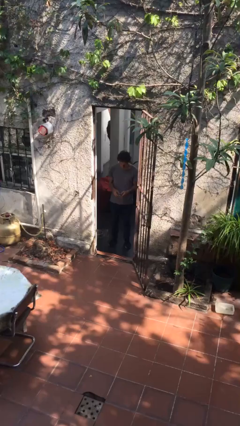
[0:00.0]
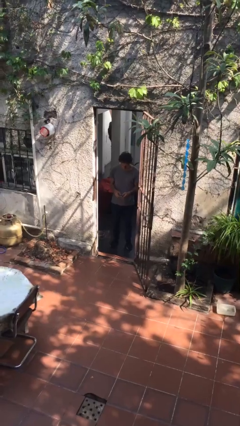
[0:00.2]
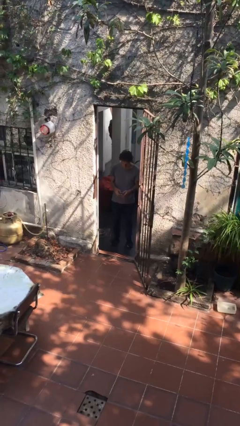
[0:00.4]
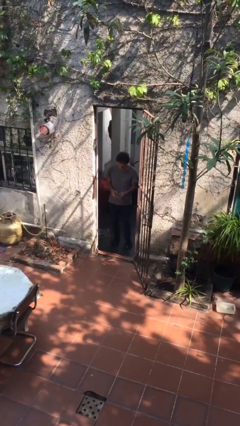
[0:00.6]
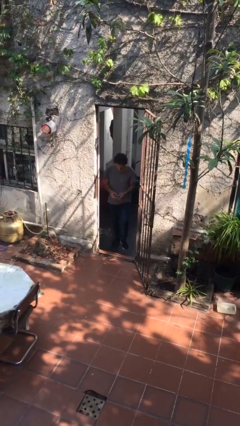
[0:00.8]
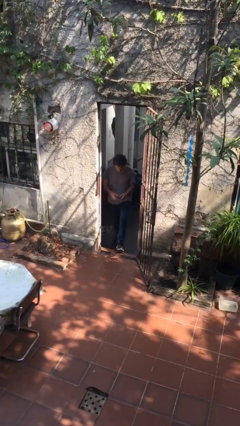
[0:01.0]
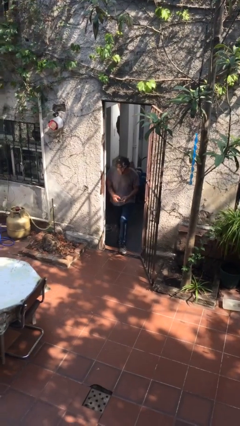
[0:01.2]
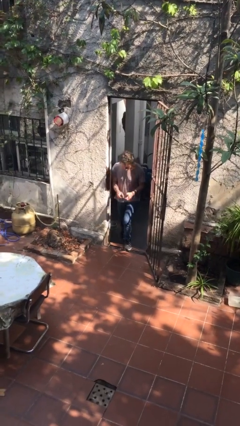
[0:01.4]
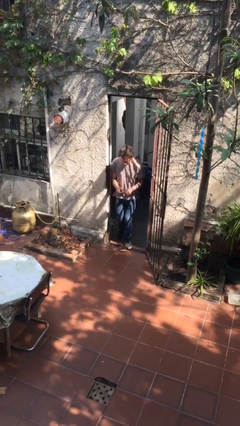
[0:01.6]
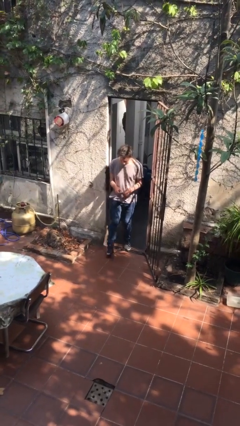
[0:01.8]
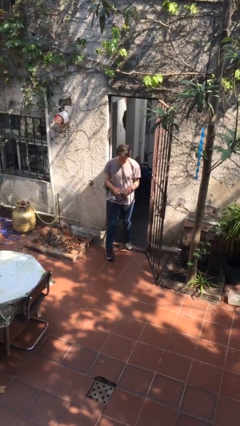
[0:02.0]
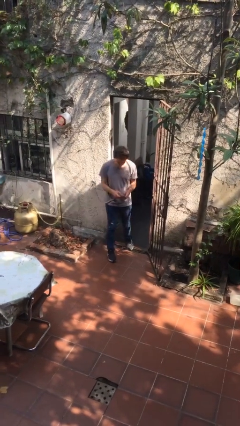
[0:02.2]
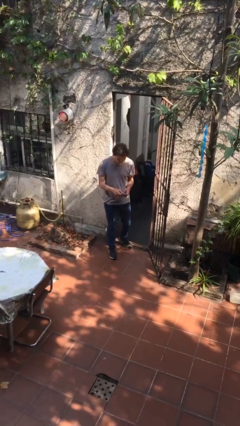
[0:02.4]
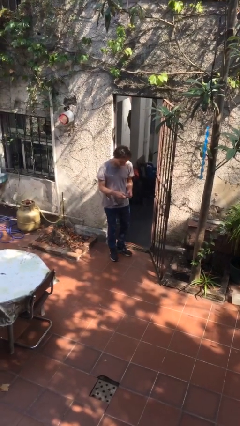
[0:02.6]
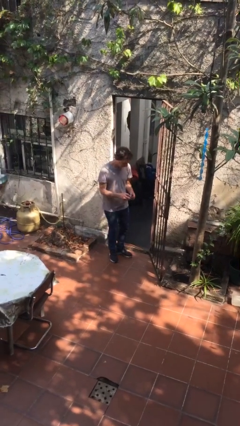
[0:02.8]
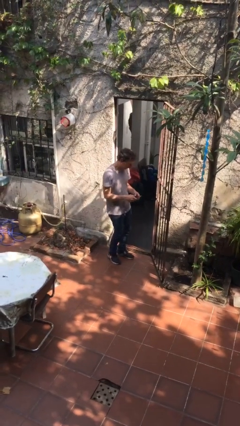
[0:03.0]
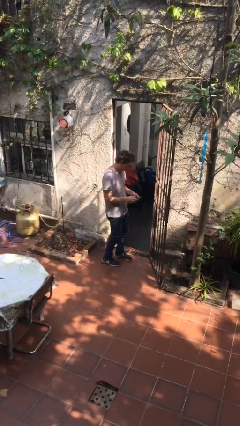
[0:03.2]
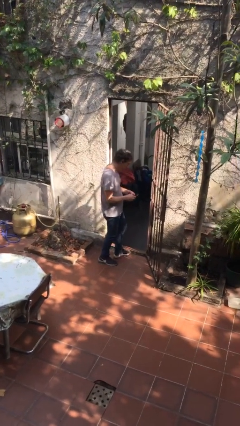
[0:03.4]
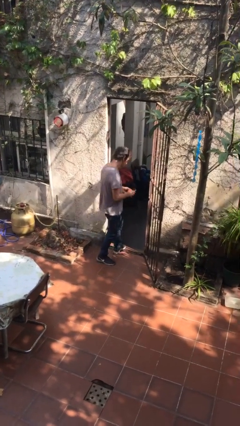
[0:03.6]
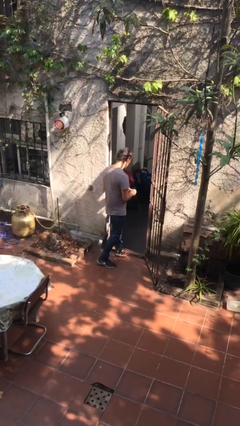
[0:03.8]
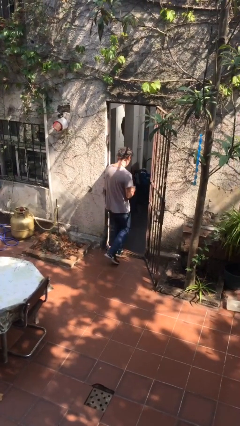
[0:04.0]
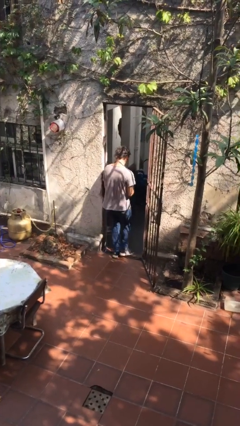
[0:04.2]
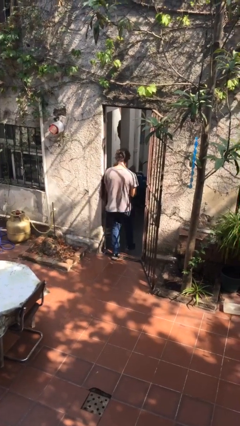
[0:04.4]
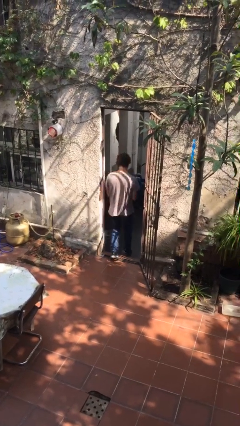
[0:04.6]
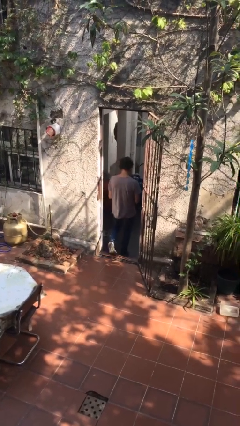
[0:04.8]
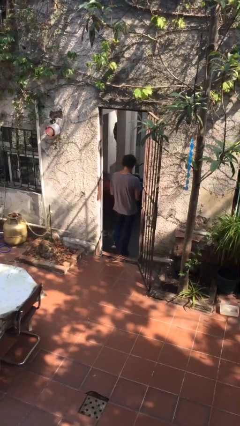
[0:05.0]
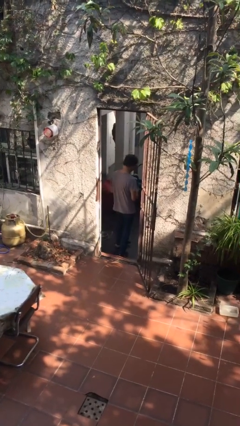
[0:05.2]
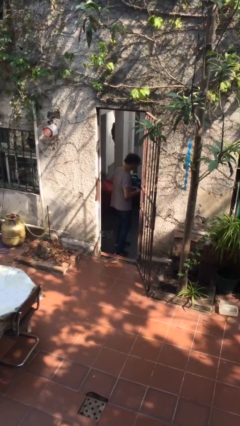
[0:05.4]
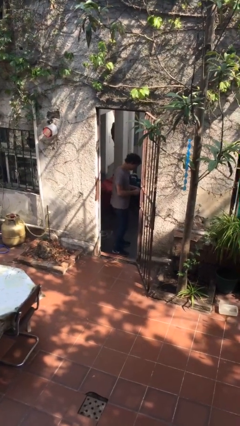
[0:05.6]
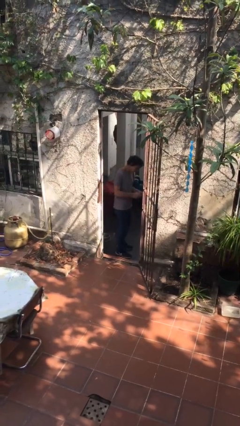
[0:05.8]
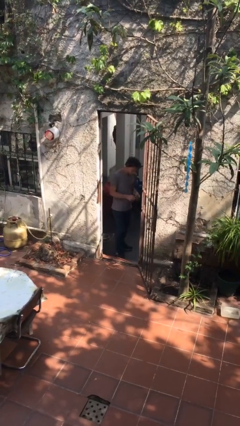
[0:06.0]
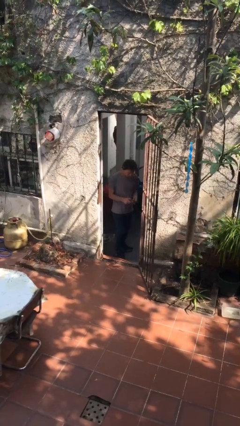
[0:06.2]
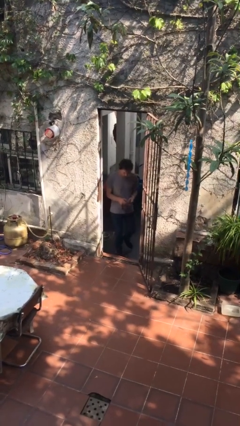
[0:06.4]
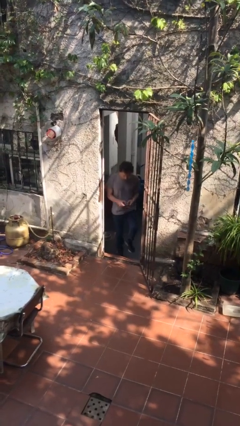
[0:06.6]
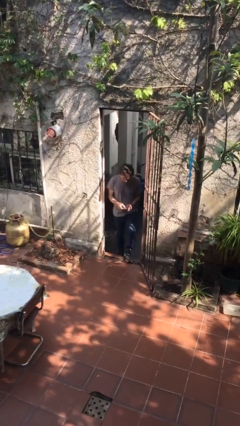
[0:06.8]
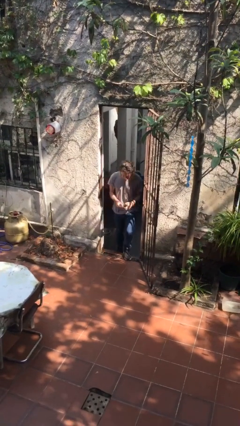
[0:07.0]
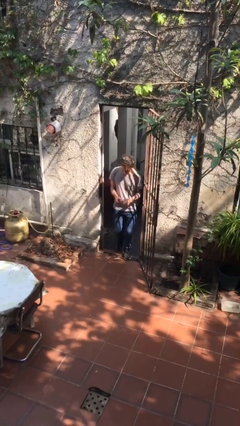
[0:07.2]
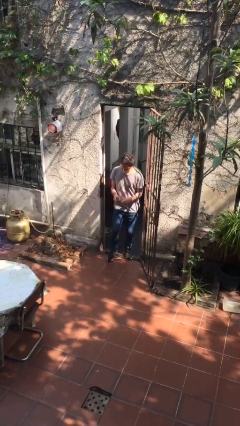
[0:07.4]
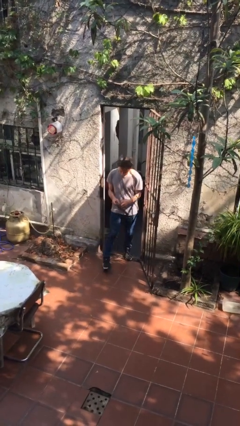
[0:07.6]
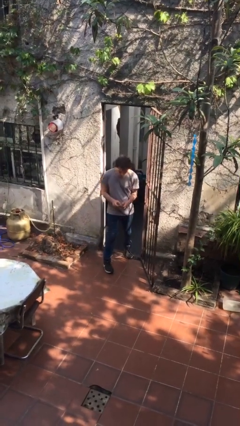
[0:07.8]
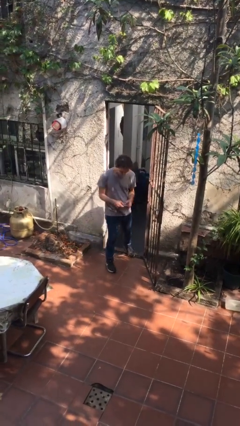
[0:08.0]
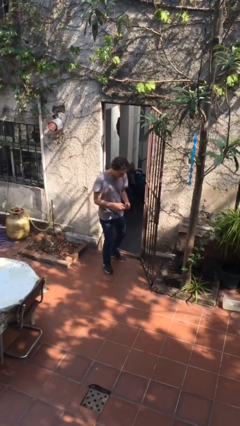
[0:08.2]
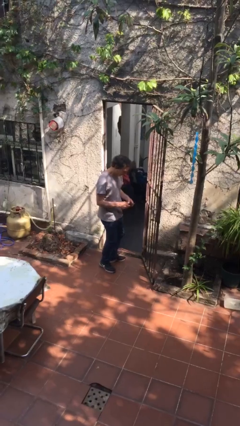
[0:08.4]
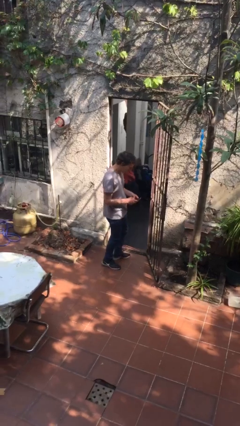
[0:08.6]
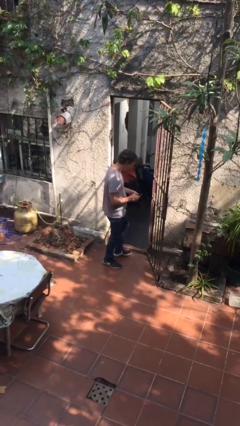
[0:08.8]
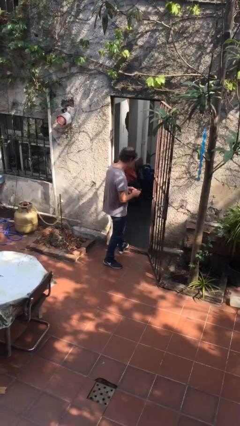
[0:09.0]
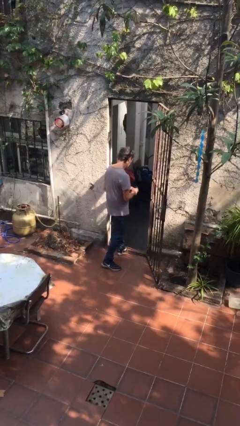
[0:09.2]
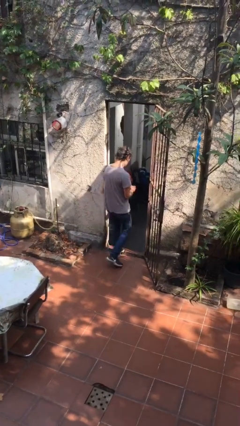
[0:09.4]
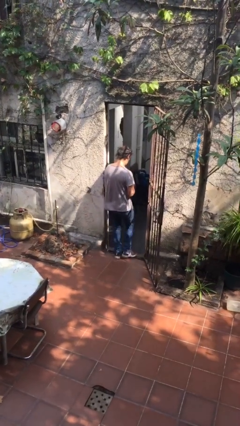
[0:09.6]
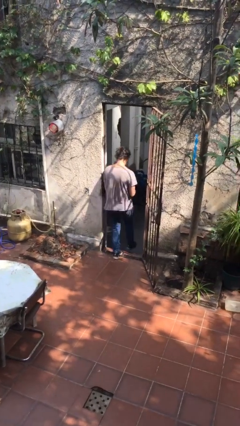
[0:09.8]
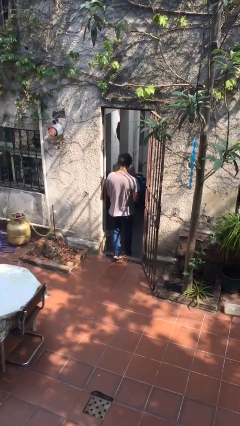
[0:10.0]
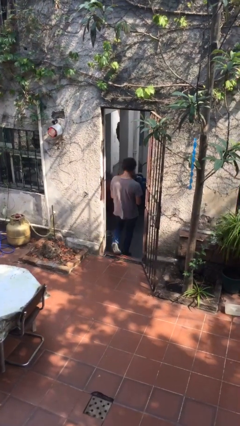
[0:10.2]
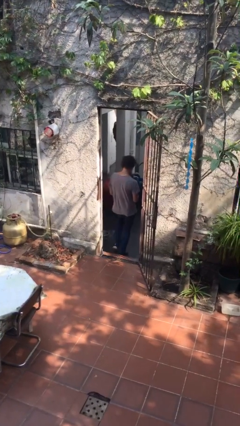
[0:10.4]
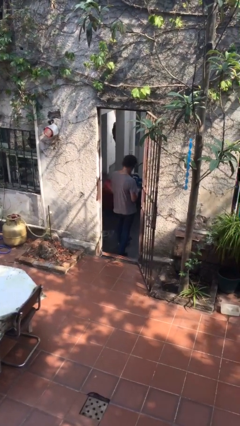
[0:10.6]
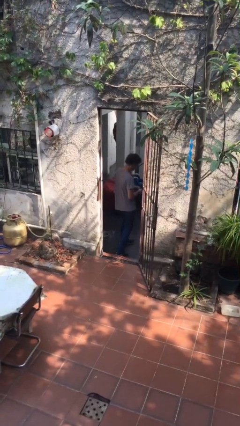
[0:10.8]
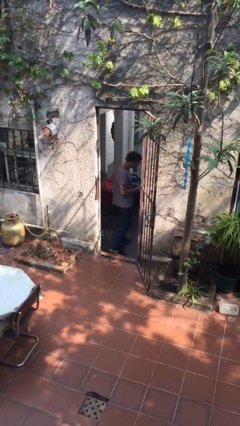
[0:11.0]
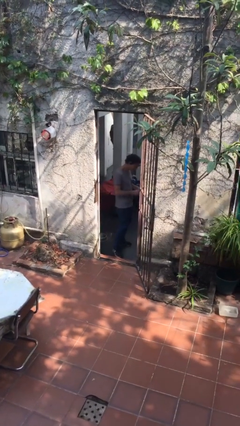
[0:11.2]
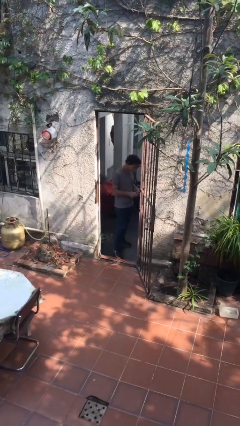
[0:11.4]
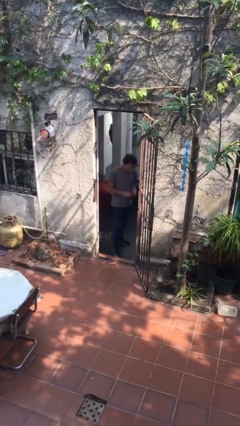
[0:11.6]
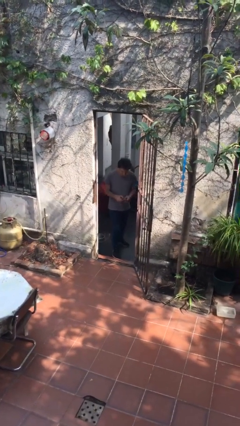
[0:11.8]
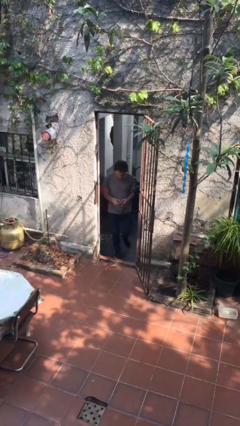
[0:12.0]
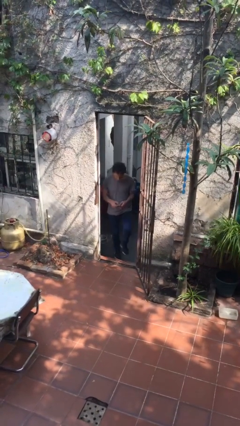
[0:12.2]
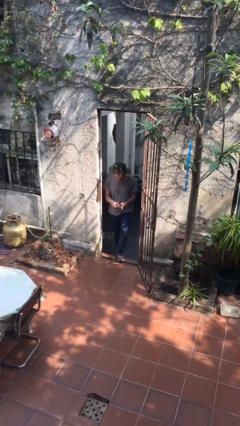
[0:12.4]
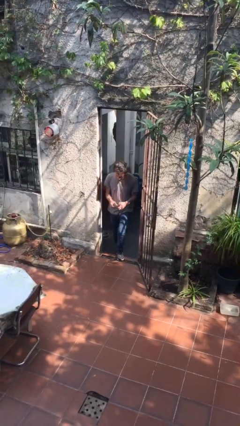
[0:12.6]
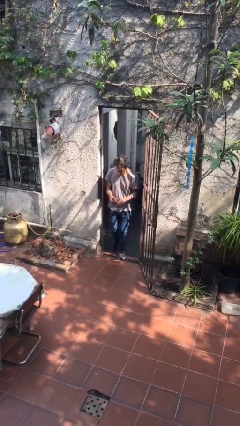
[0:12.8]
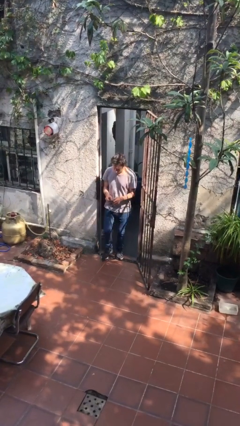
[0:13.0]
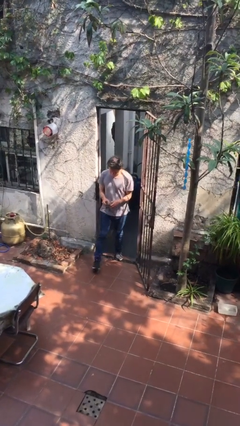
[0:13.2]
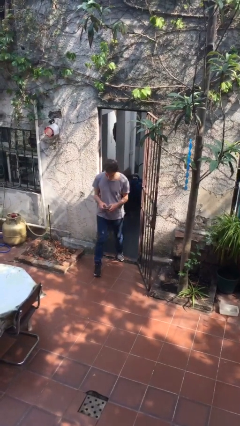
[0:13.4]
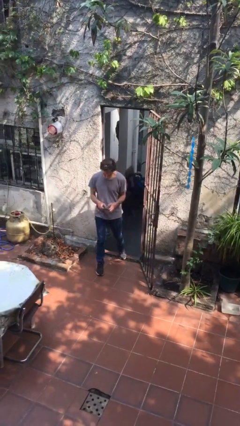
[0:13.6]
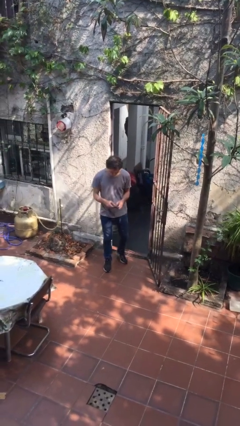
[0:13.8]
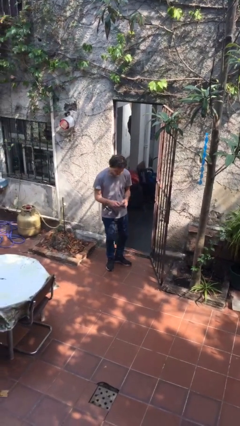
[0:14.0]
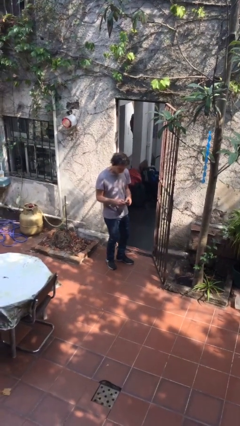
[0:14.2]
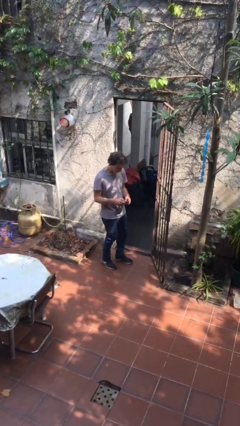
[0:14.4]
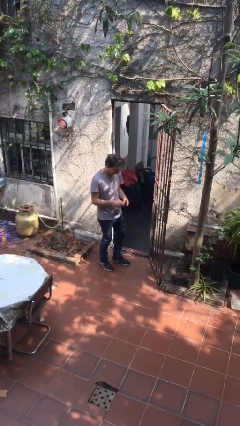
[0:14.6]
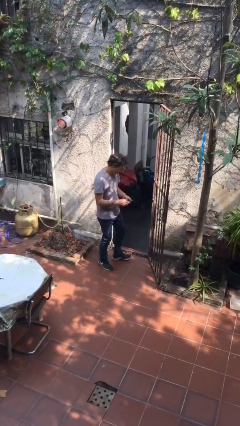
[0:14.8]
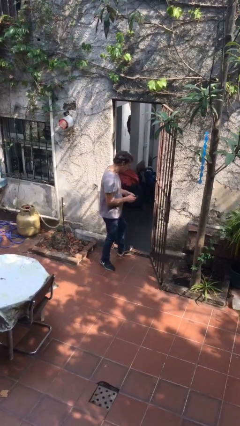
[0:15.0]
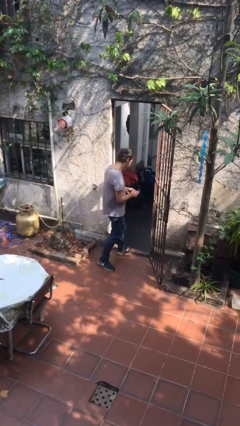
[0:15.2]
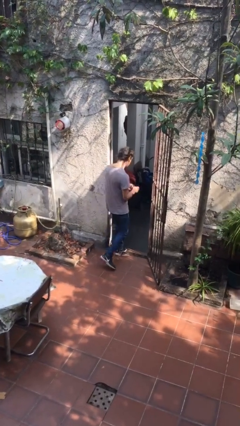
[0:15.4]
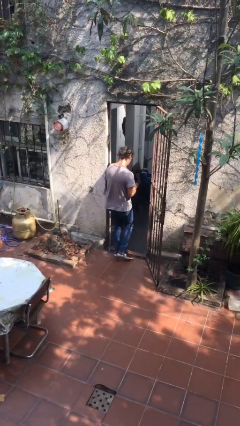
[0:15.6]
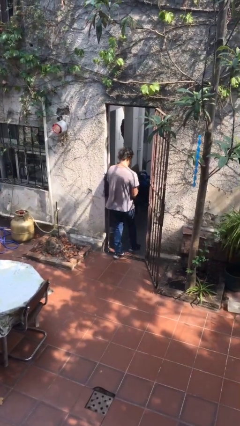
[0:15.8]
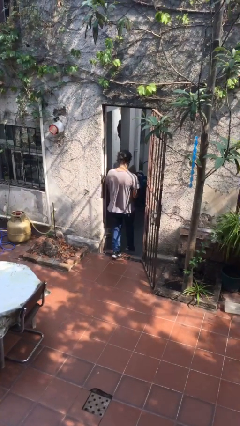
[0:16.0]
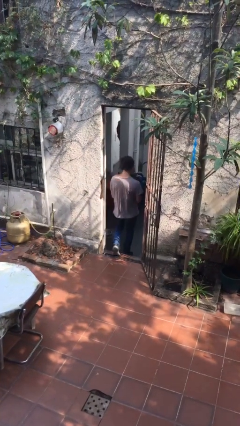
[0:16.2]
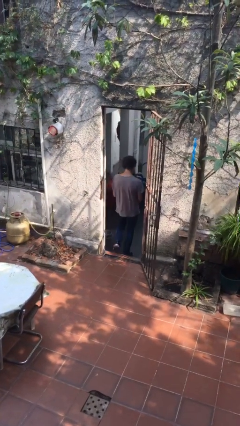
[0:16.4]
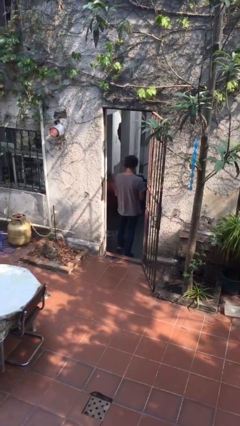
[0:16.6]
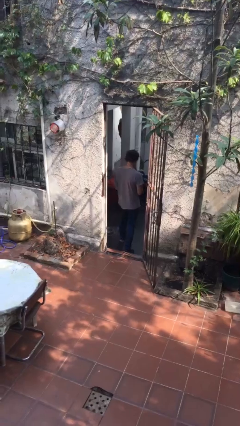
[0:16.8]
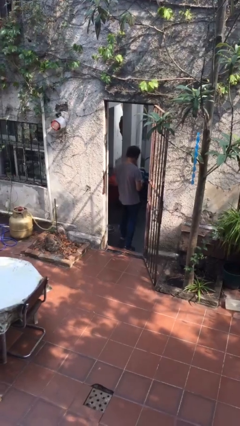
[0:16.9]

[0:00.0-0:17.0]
person texts on phone

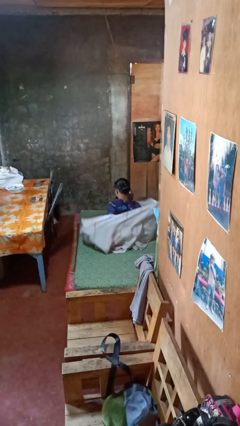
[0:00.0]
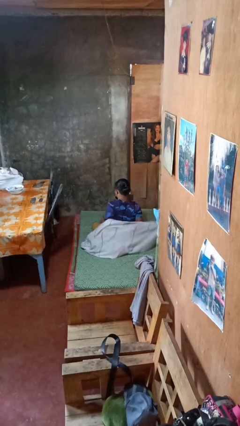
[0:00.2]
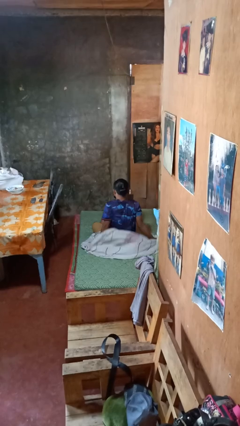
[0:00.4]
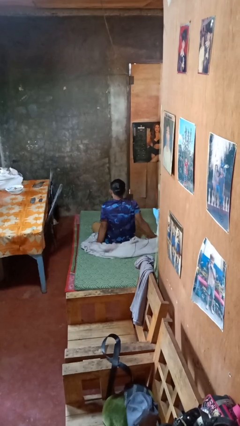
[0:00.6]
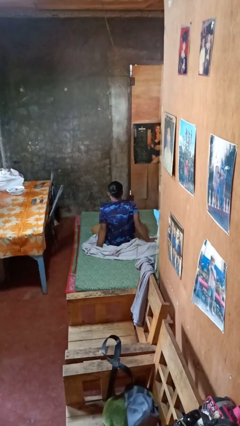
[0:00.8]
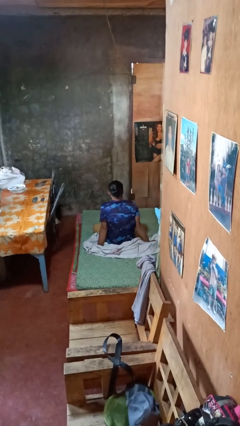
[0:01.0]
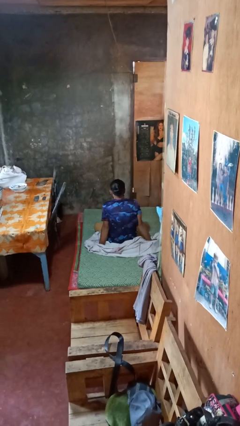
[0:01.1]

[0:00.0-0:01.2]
person uncovers with blanket
